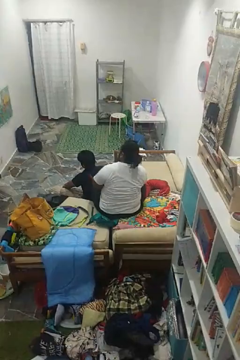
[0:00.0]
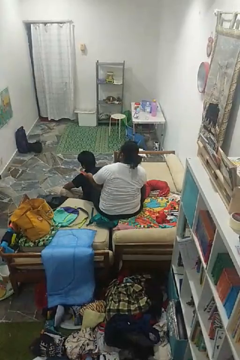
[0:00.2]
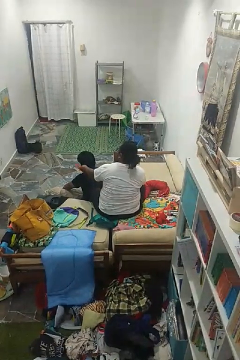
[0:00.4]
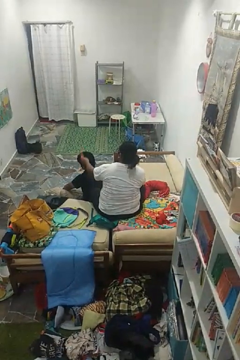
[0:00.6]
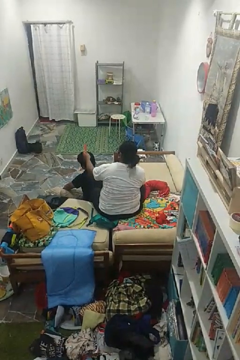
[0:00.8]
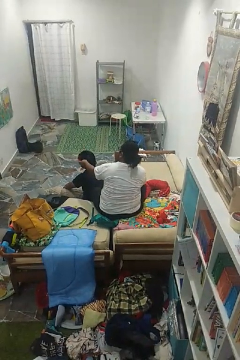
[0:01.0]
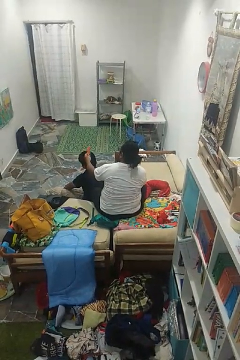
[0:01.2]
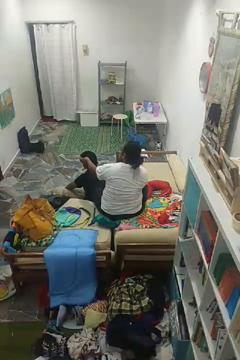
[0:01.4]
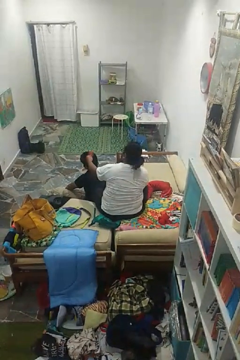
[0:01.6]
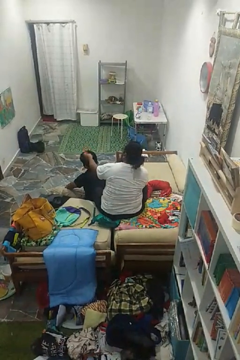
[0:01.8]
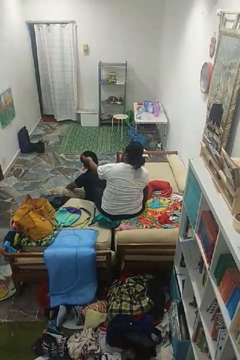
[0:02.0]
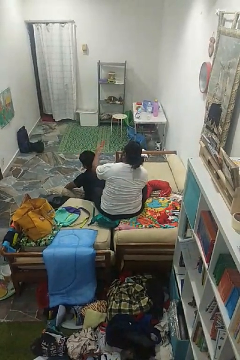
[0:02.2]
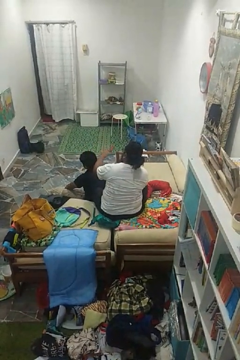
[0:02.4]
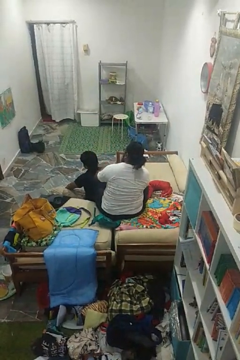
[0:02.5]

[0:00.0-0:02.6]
person brushes hair of person

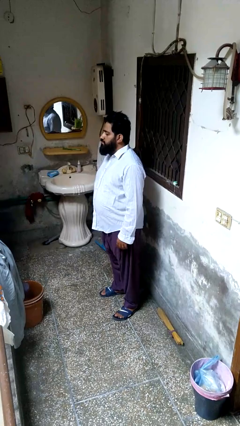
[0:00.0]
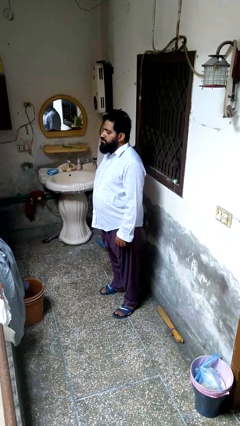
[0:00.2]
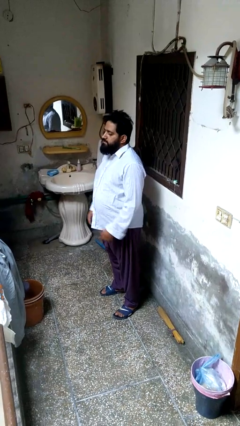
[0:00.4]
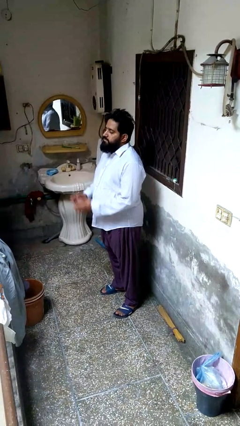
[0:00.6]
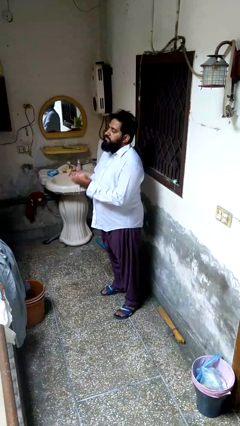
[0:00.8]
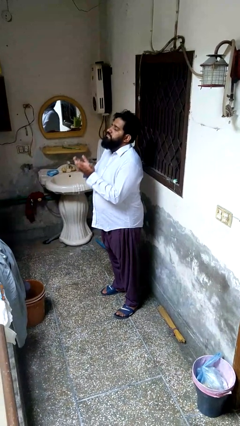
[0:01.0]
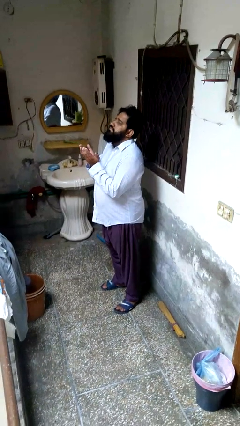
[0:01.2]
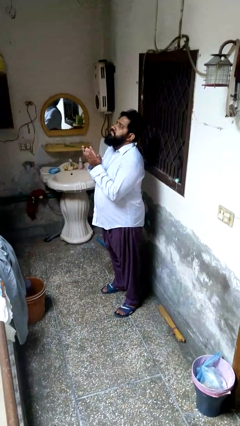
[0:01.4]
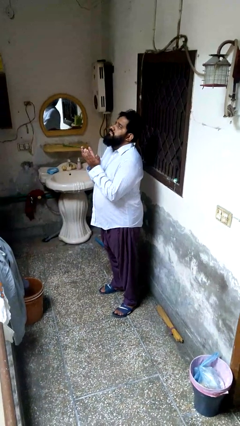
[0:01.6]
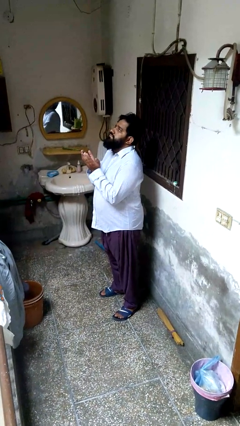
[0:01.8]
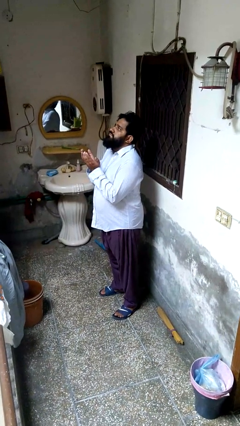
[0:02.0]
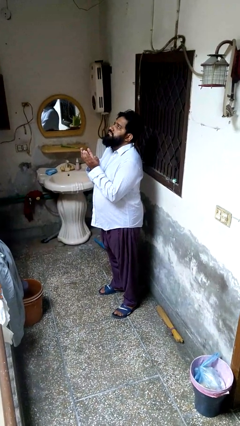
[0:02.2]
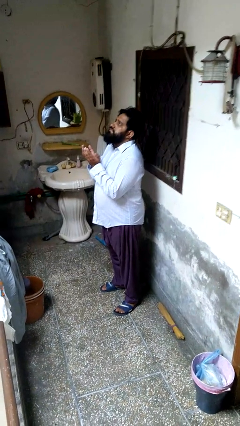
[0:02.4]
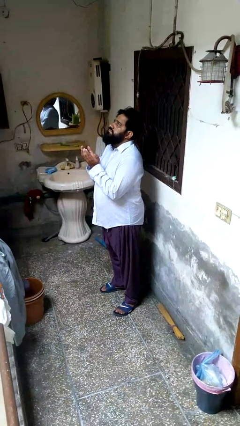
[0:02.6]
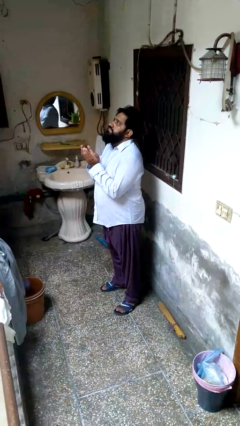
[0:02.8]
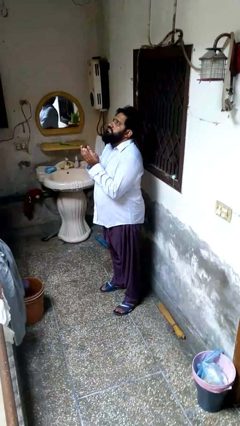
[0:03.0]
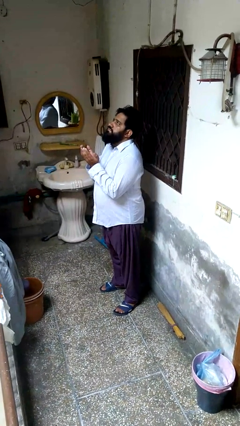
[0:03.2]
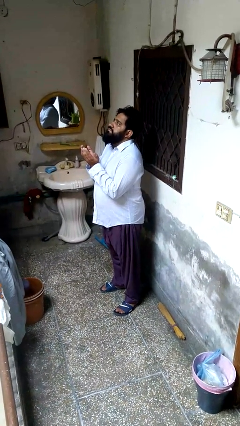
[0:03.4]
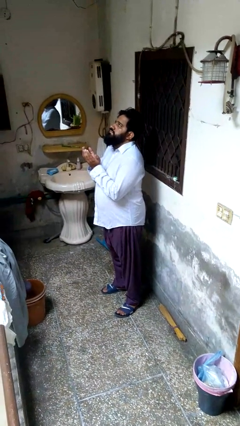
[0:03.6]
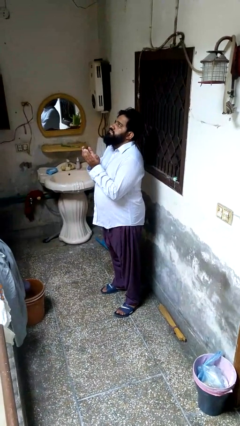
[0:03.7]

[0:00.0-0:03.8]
person prays

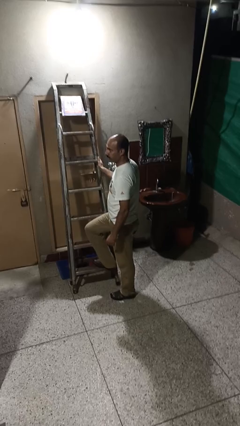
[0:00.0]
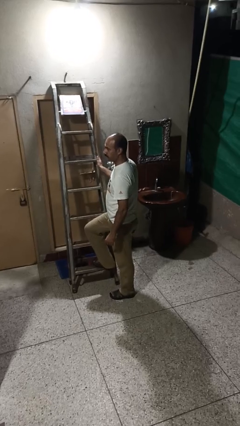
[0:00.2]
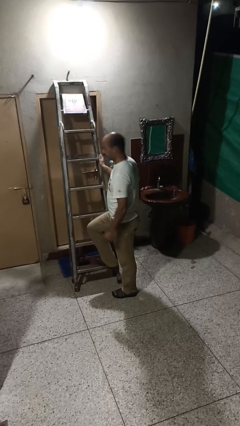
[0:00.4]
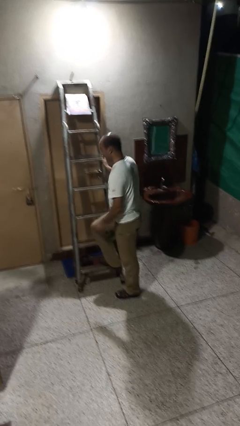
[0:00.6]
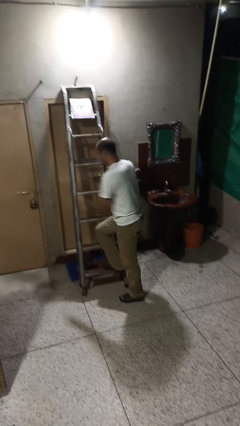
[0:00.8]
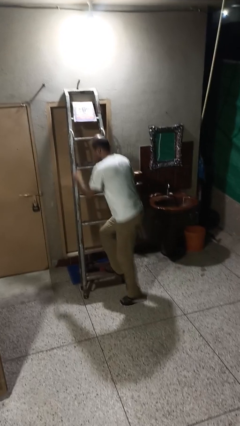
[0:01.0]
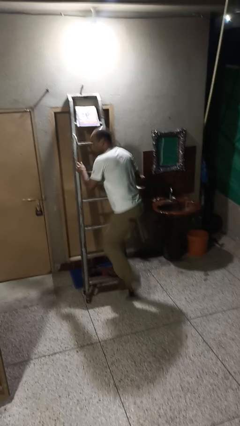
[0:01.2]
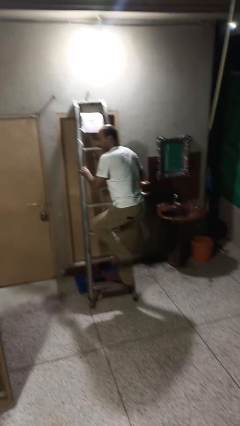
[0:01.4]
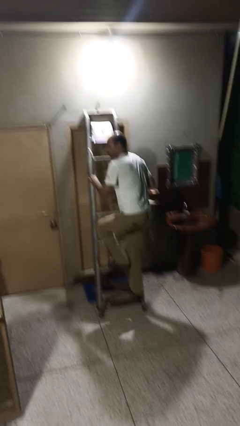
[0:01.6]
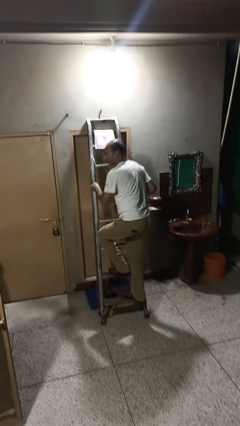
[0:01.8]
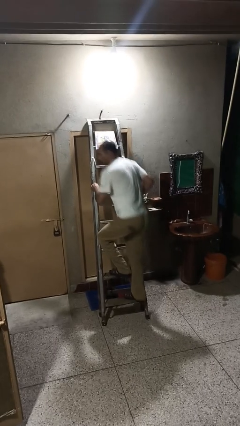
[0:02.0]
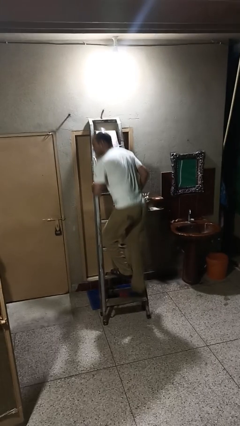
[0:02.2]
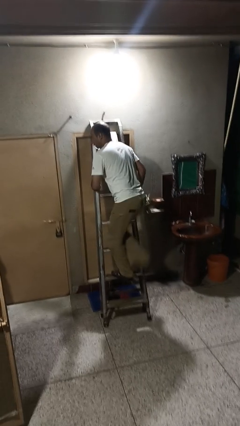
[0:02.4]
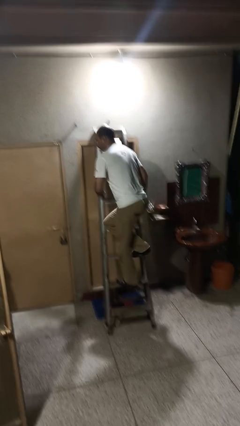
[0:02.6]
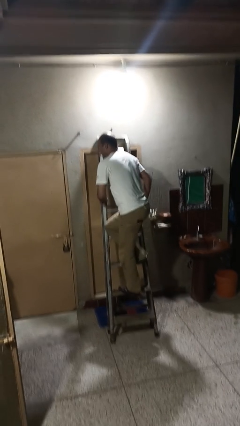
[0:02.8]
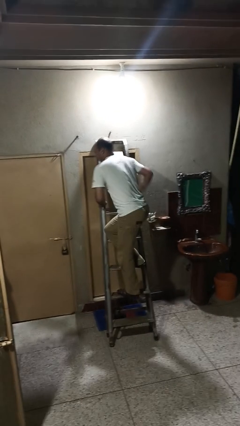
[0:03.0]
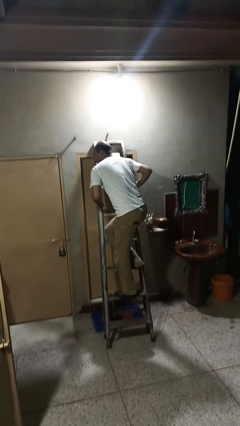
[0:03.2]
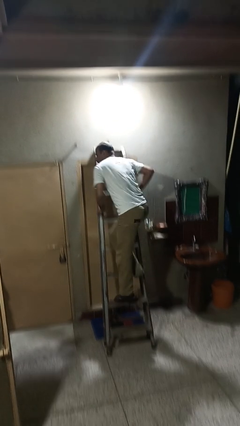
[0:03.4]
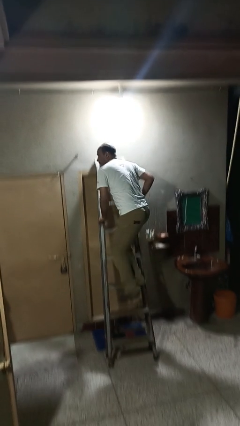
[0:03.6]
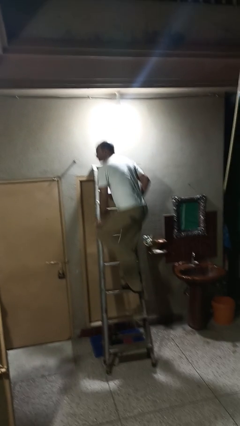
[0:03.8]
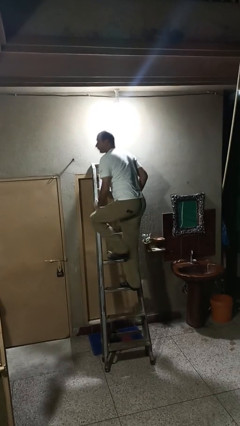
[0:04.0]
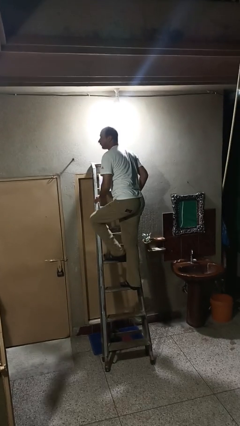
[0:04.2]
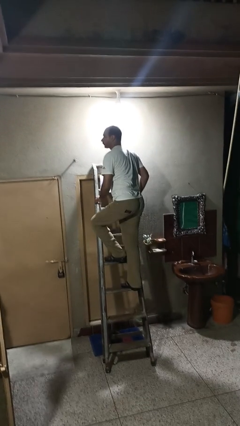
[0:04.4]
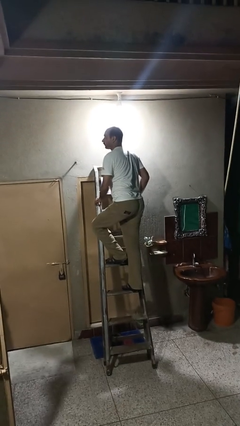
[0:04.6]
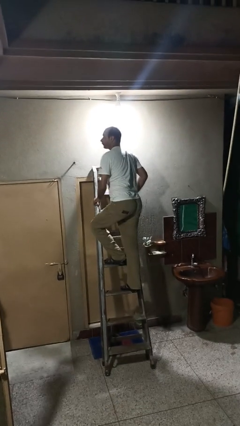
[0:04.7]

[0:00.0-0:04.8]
person climbs up ladder

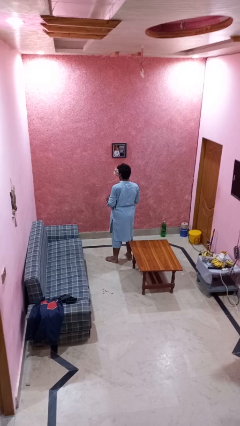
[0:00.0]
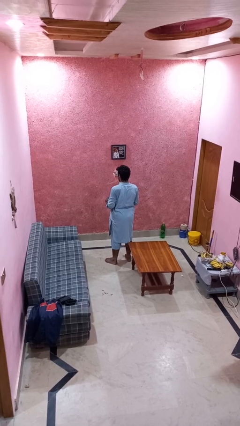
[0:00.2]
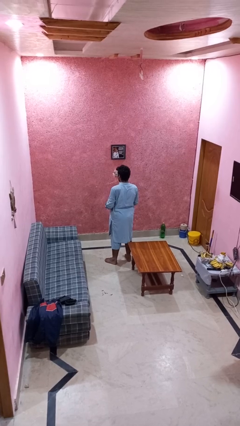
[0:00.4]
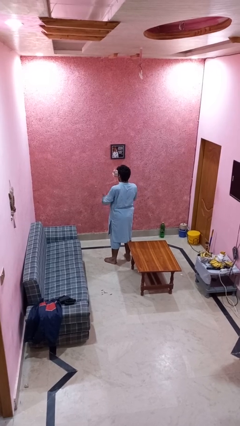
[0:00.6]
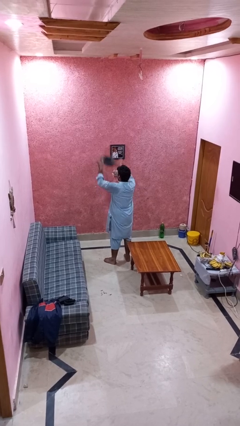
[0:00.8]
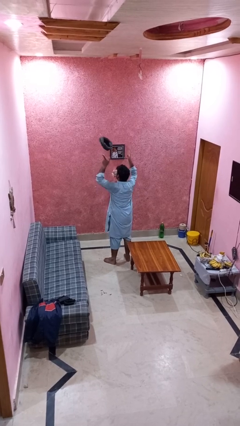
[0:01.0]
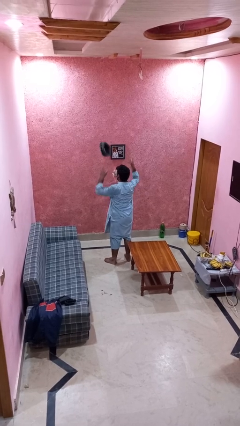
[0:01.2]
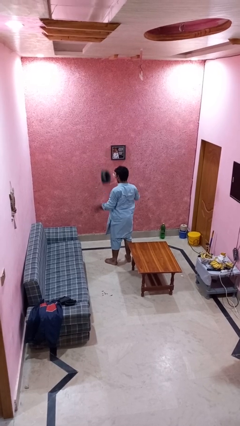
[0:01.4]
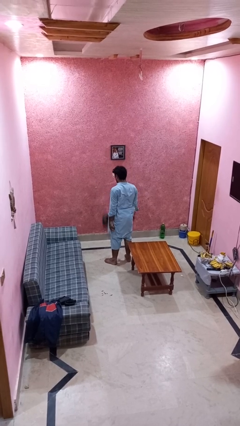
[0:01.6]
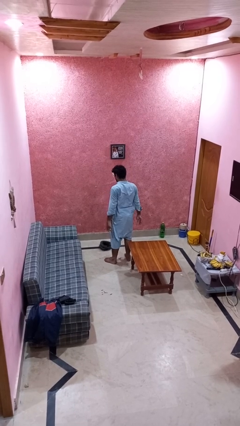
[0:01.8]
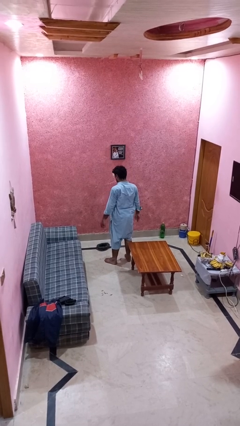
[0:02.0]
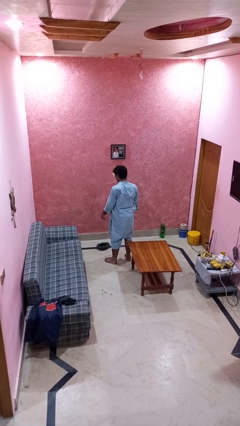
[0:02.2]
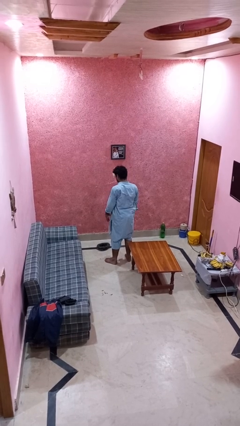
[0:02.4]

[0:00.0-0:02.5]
person throws object into air

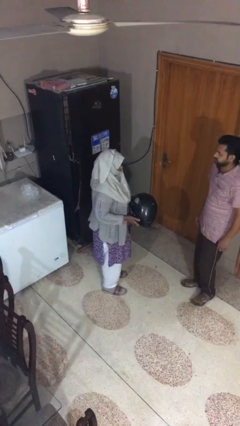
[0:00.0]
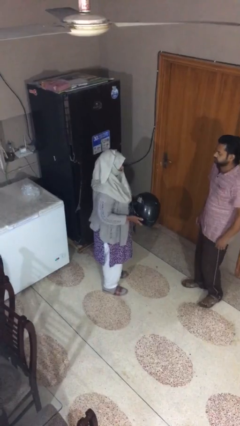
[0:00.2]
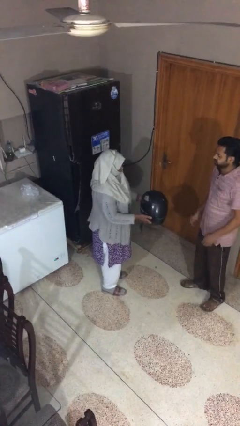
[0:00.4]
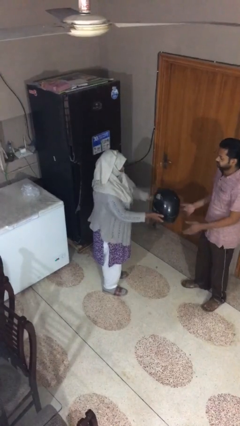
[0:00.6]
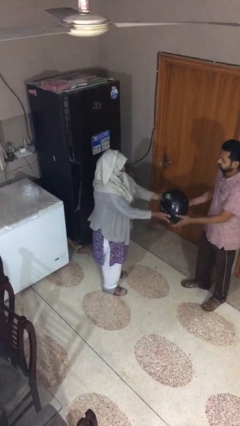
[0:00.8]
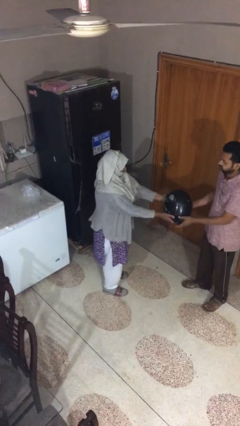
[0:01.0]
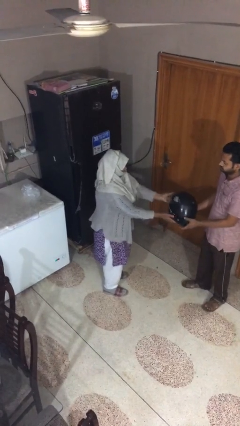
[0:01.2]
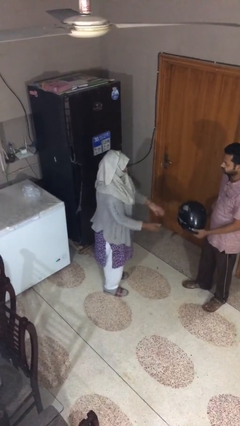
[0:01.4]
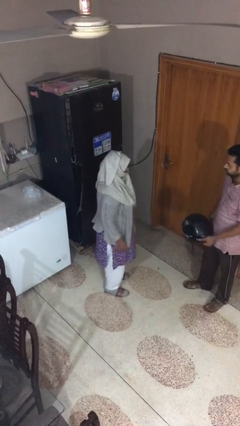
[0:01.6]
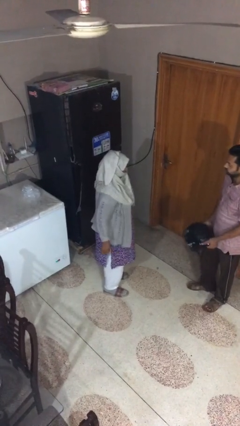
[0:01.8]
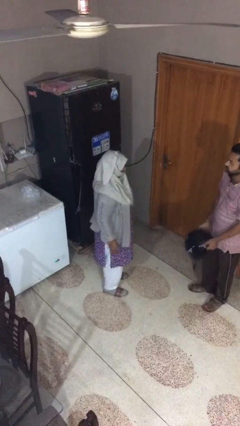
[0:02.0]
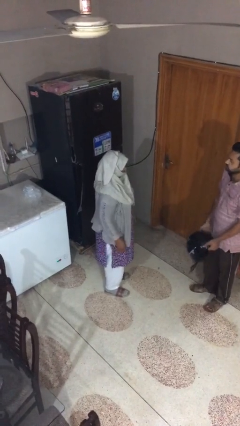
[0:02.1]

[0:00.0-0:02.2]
person transfers object to person

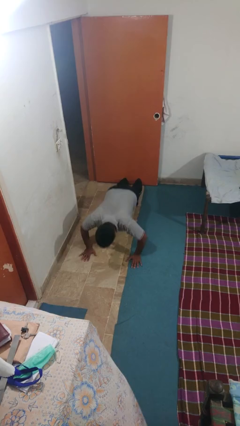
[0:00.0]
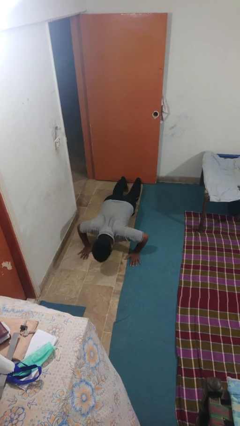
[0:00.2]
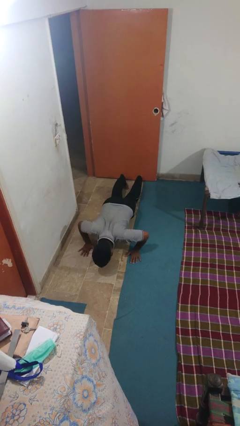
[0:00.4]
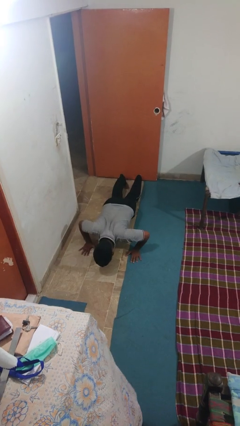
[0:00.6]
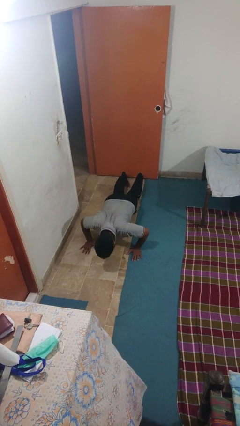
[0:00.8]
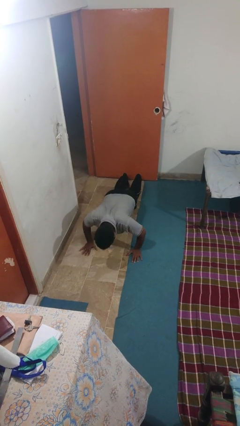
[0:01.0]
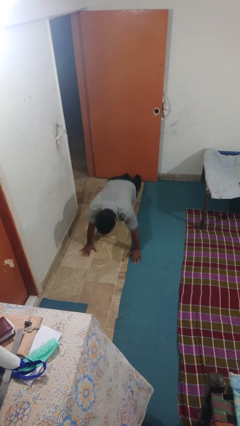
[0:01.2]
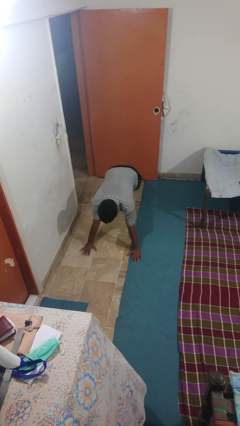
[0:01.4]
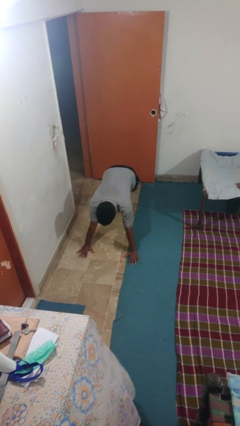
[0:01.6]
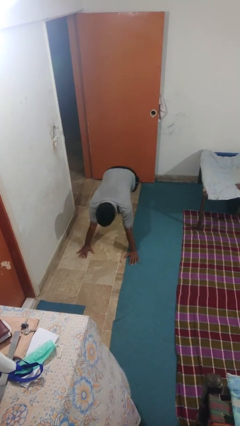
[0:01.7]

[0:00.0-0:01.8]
person exercises with pushup
